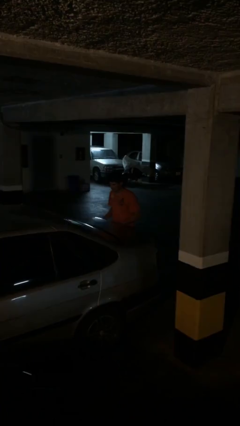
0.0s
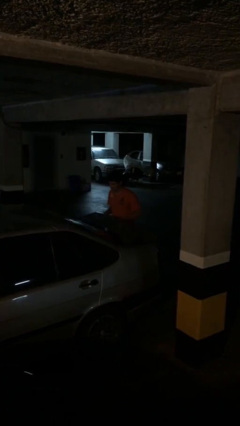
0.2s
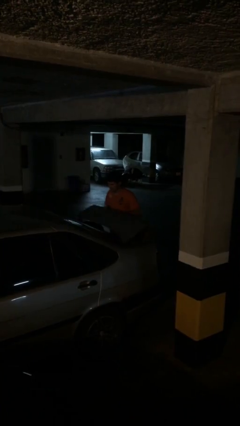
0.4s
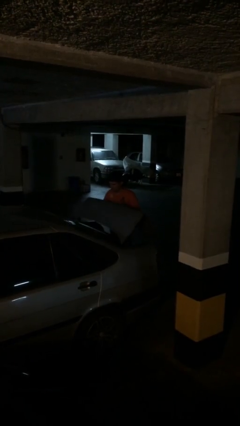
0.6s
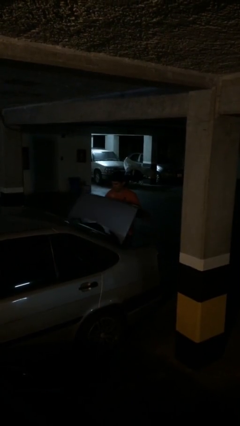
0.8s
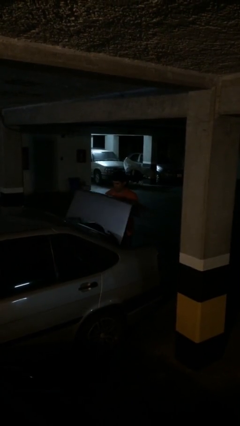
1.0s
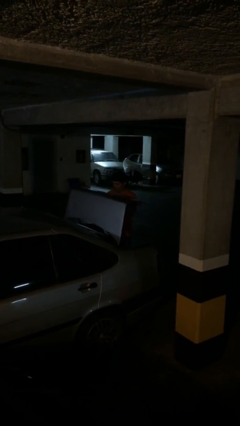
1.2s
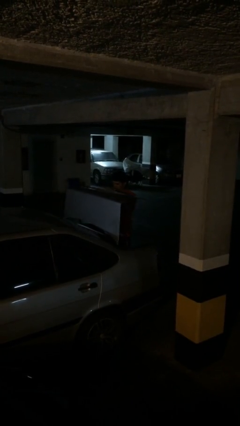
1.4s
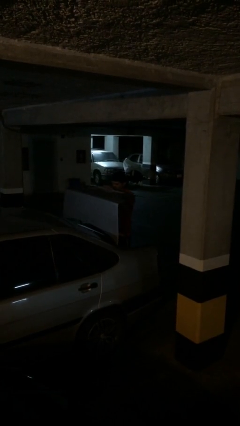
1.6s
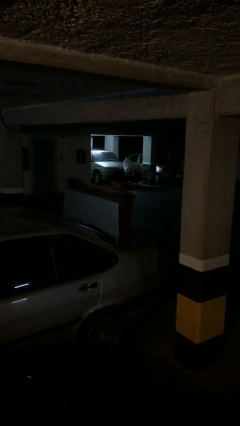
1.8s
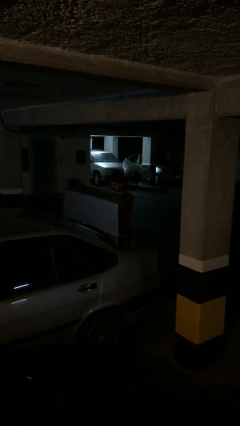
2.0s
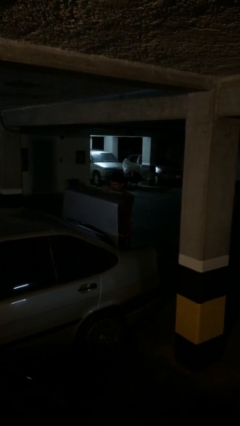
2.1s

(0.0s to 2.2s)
person opens car trunk

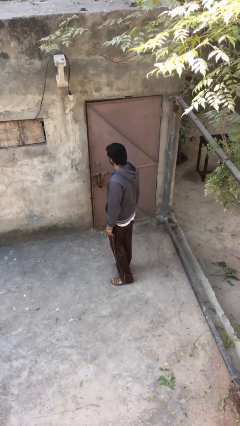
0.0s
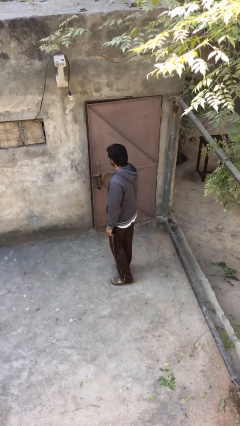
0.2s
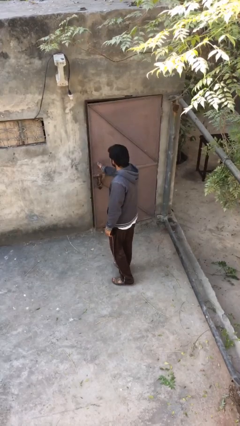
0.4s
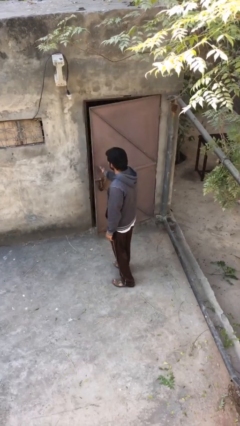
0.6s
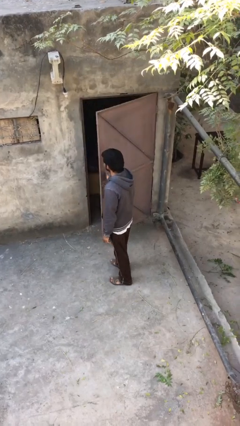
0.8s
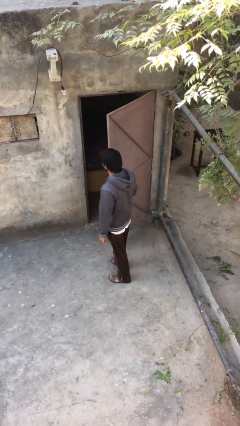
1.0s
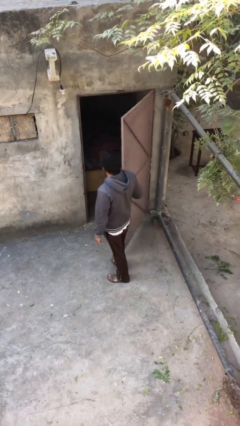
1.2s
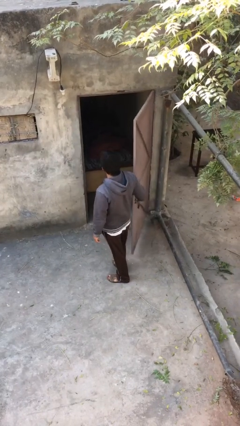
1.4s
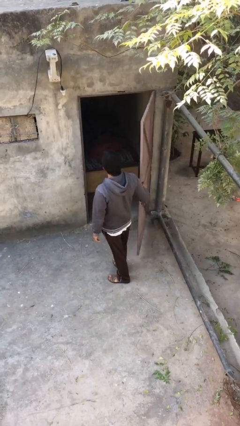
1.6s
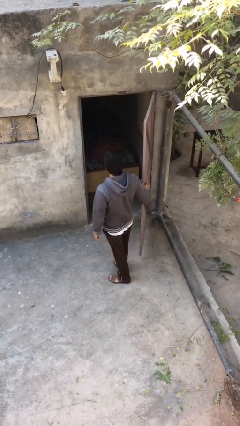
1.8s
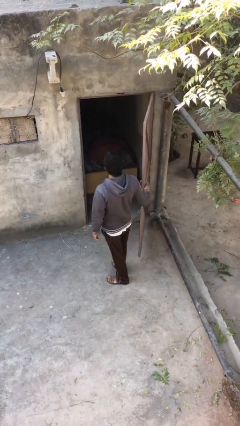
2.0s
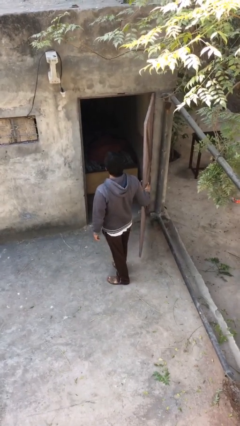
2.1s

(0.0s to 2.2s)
person opens facility door

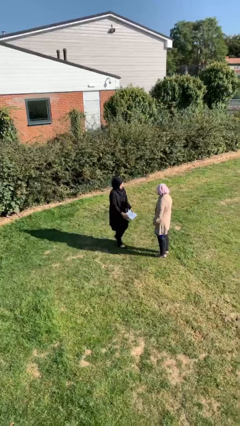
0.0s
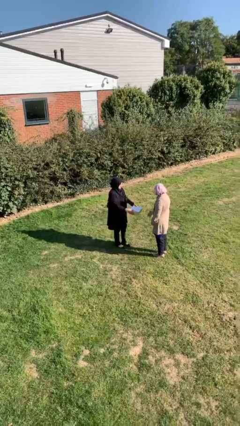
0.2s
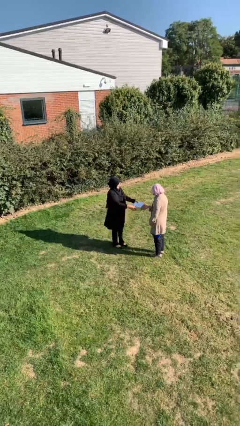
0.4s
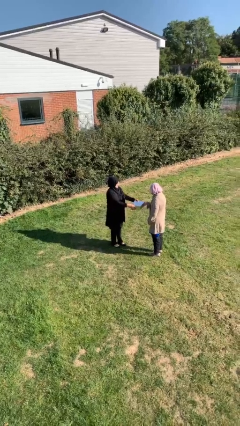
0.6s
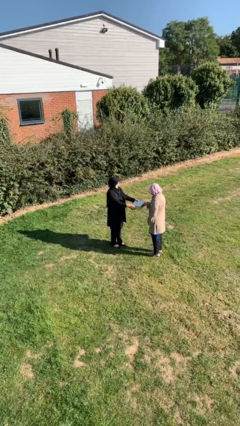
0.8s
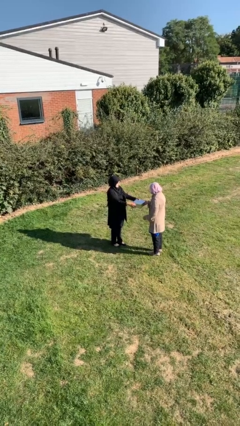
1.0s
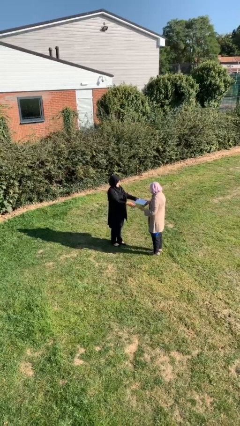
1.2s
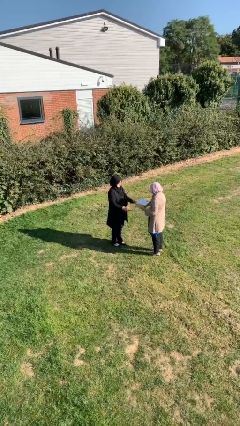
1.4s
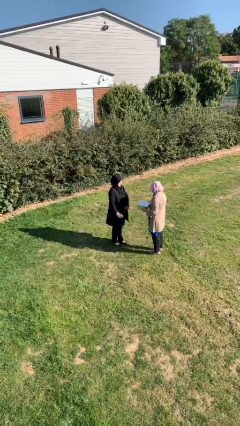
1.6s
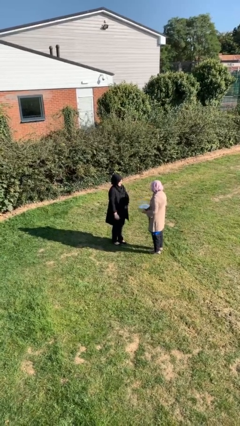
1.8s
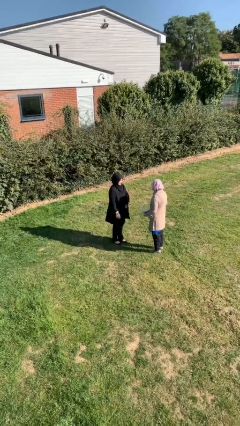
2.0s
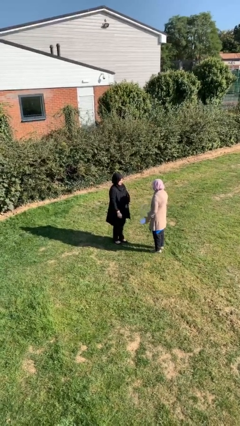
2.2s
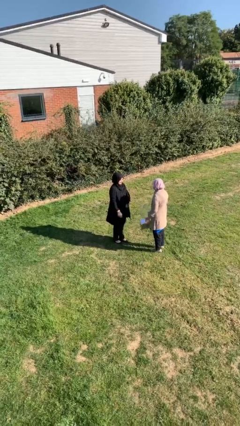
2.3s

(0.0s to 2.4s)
person transfers object to person

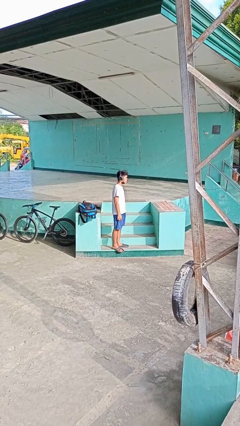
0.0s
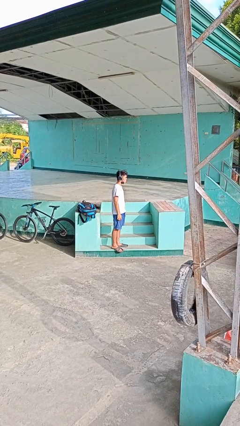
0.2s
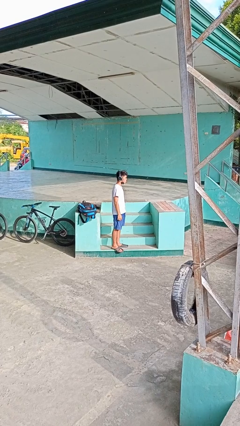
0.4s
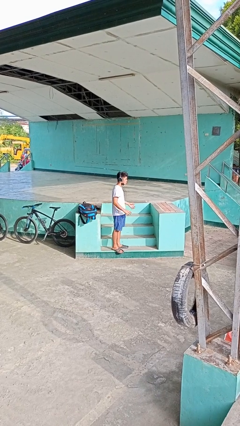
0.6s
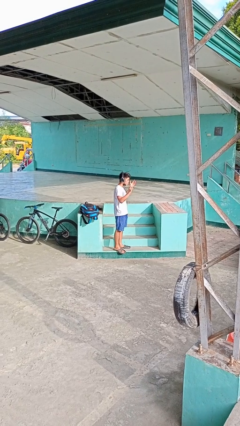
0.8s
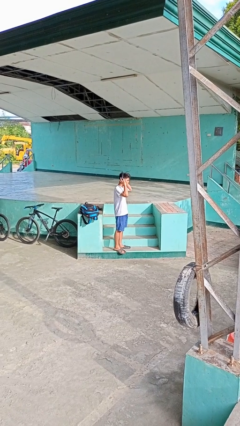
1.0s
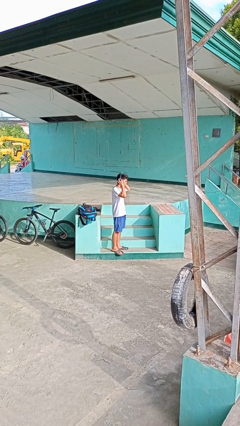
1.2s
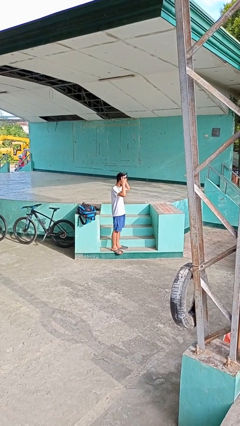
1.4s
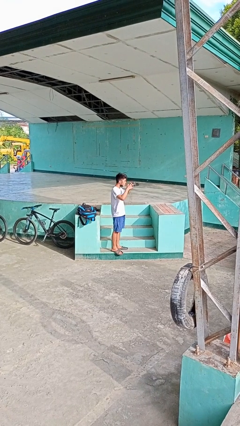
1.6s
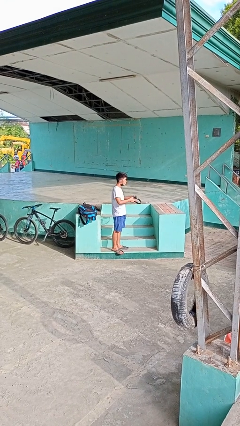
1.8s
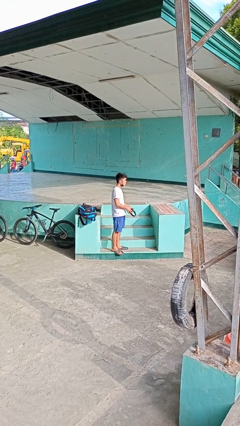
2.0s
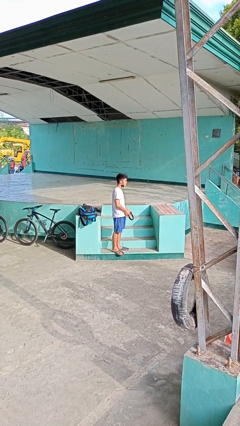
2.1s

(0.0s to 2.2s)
person takes off headphones

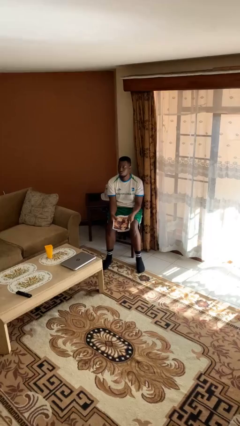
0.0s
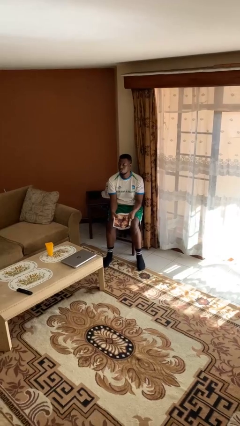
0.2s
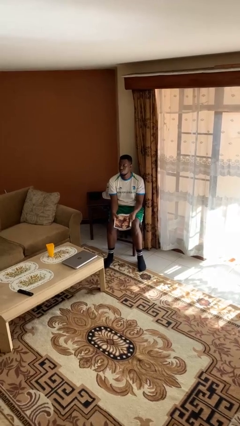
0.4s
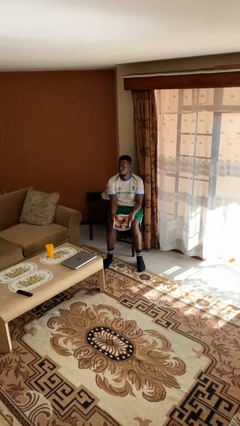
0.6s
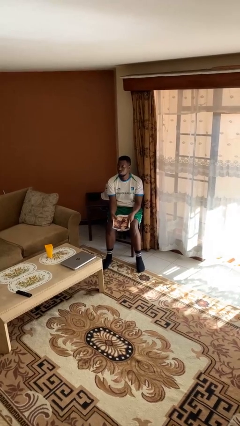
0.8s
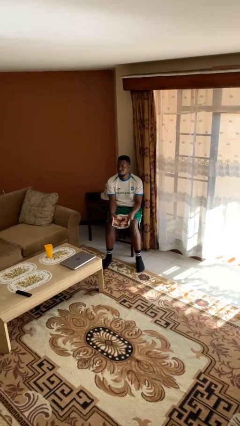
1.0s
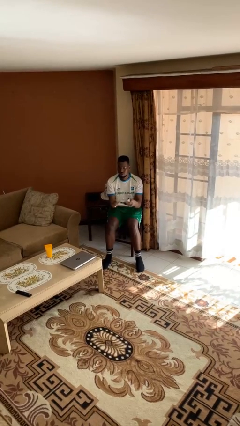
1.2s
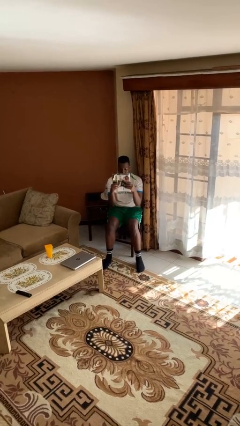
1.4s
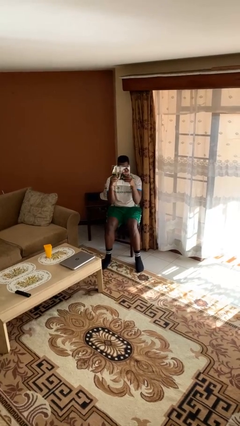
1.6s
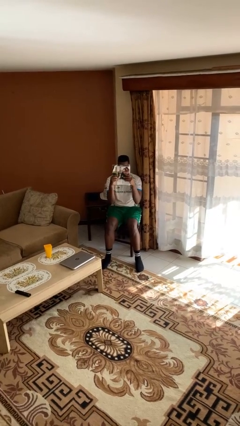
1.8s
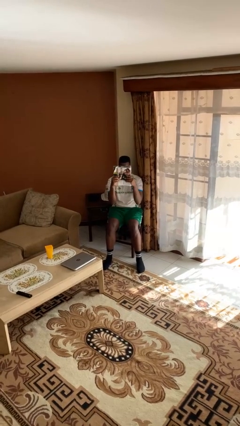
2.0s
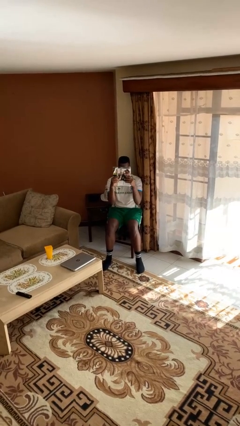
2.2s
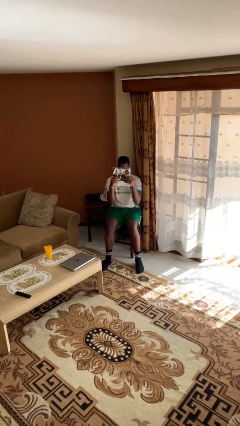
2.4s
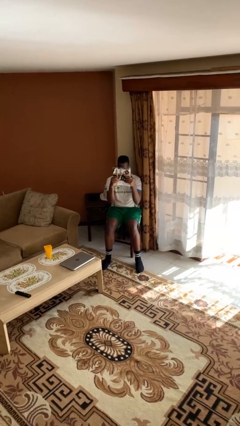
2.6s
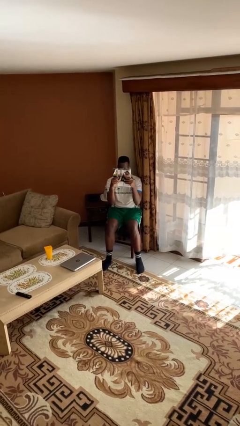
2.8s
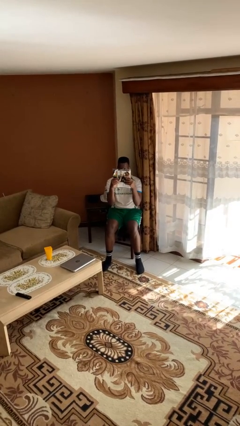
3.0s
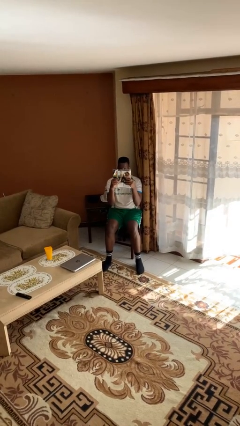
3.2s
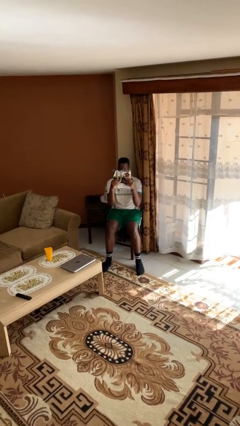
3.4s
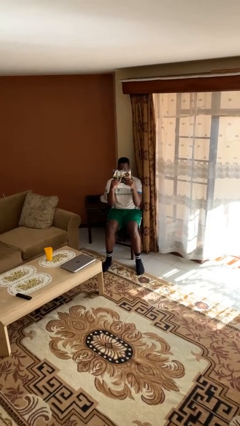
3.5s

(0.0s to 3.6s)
person reads document

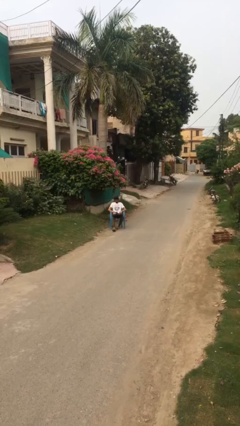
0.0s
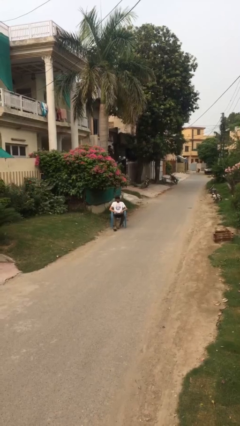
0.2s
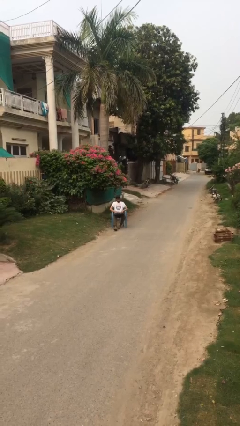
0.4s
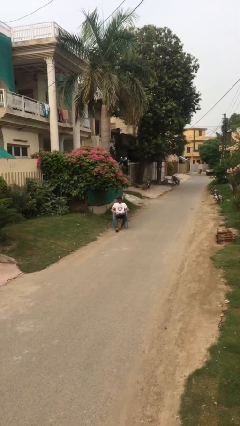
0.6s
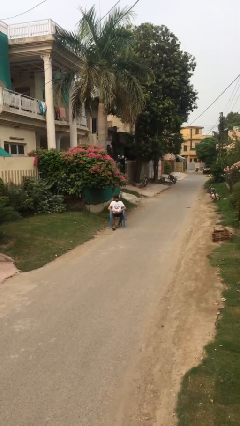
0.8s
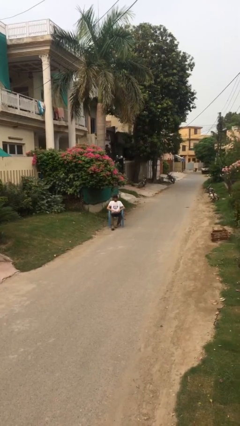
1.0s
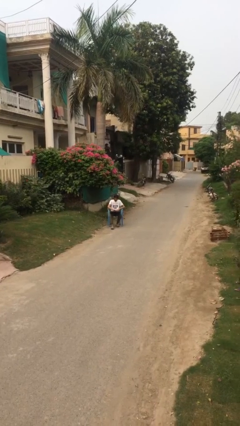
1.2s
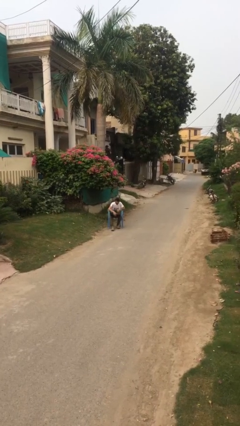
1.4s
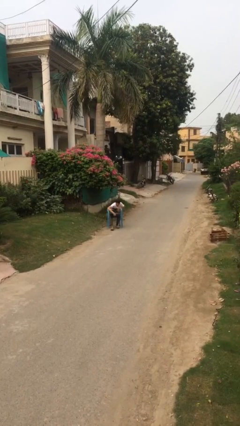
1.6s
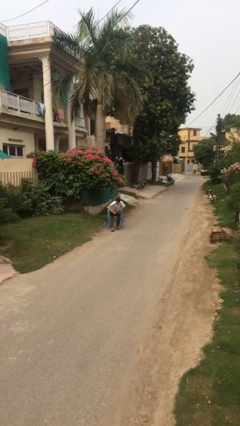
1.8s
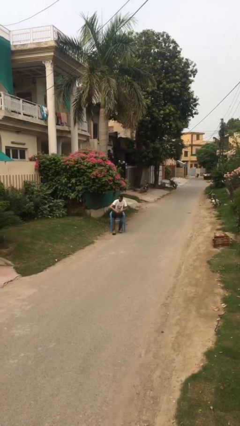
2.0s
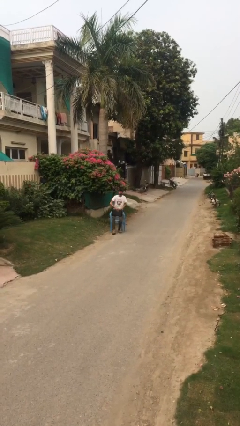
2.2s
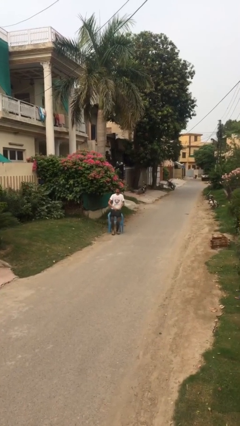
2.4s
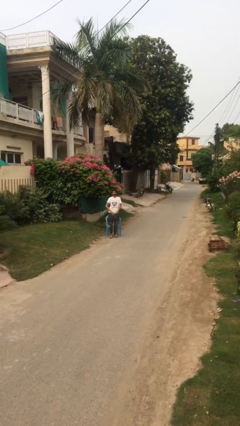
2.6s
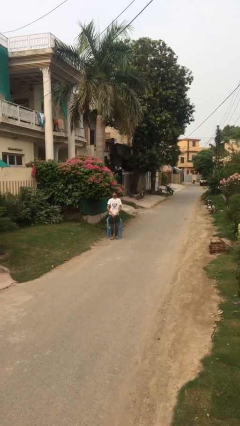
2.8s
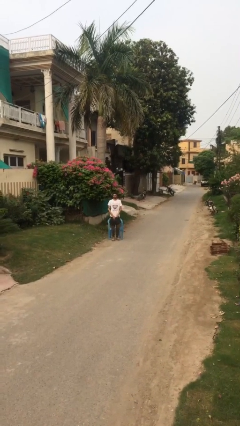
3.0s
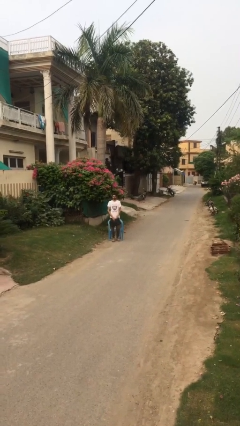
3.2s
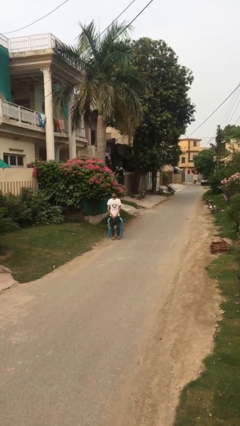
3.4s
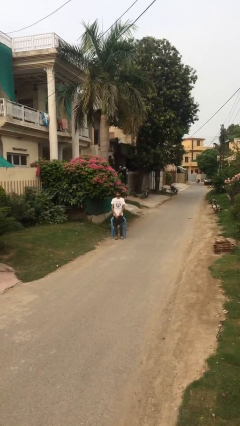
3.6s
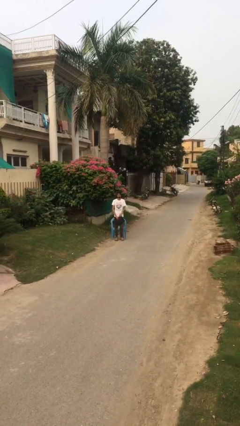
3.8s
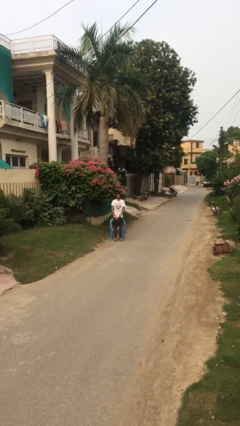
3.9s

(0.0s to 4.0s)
person stands up

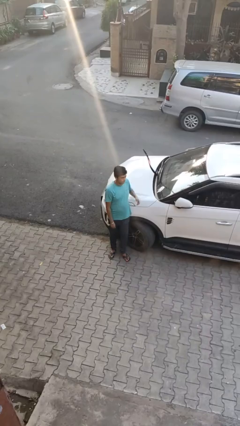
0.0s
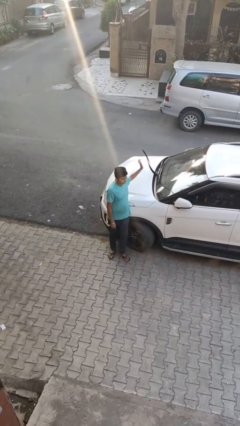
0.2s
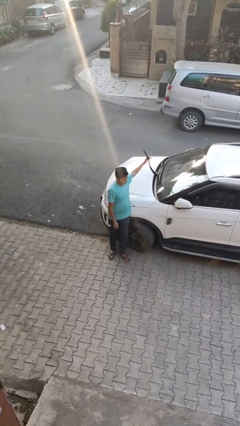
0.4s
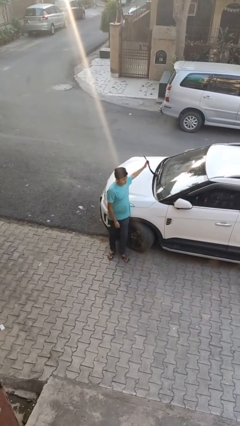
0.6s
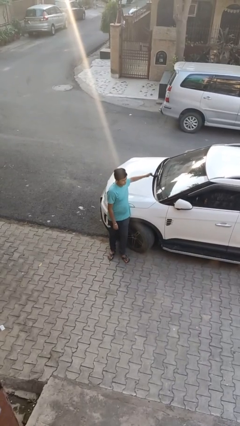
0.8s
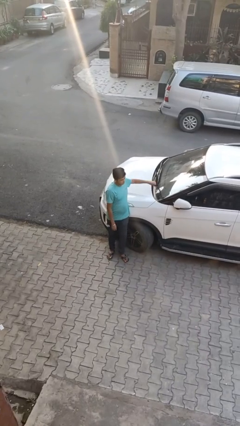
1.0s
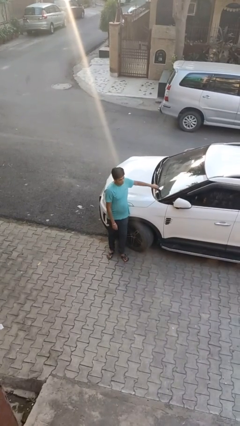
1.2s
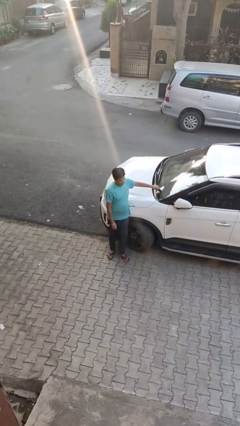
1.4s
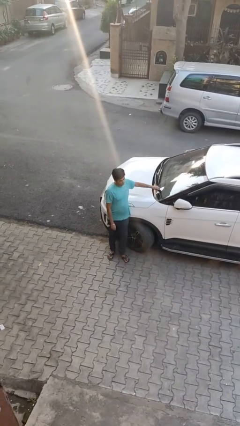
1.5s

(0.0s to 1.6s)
person flips down car wipers
